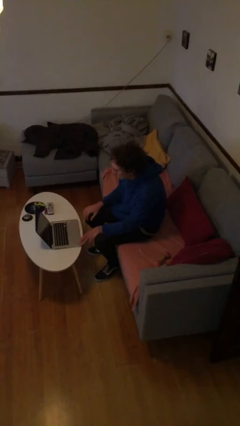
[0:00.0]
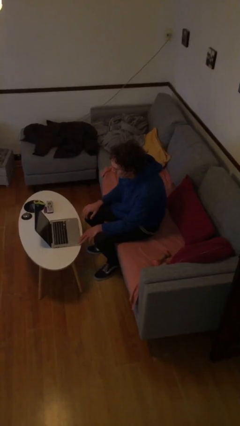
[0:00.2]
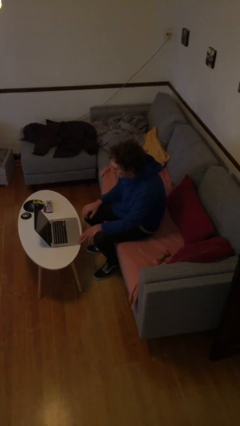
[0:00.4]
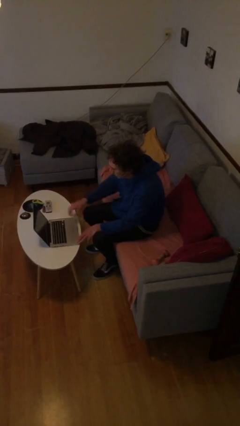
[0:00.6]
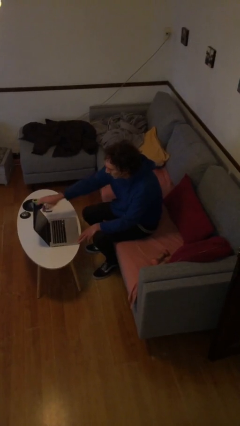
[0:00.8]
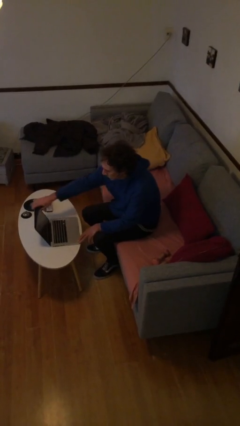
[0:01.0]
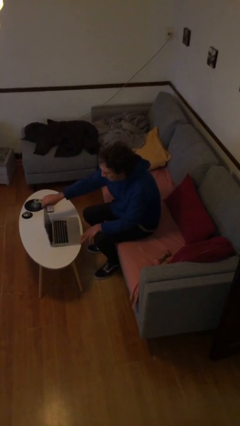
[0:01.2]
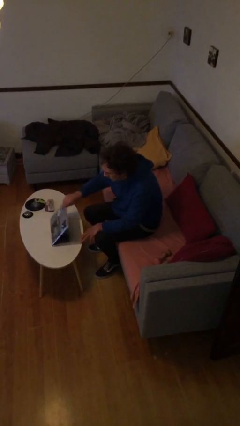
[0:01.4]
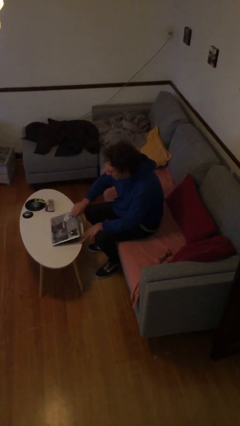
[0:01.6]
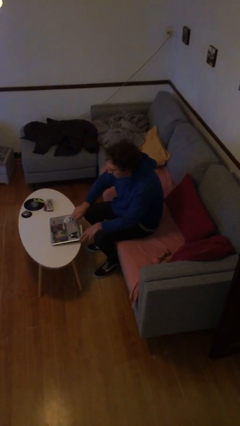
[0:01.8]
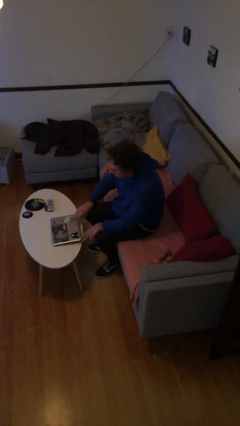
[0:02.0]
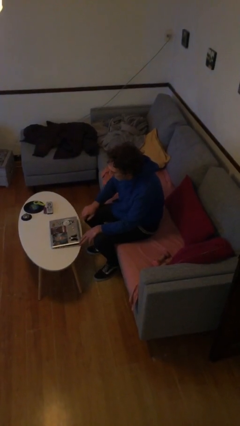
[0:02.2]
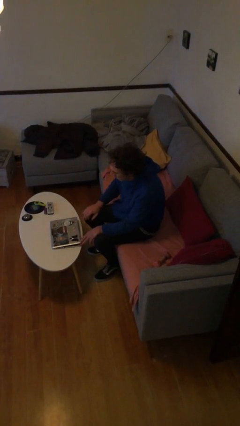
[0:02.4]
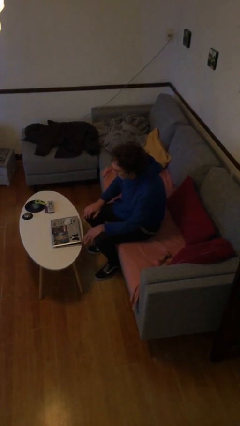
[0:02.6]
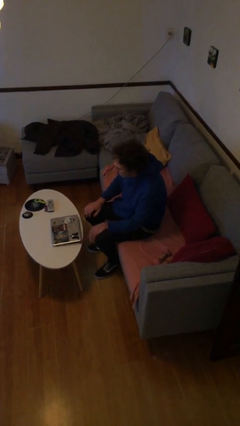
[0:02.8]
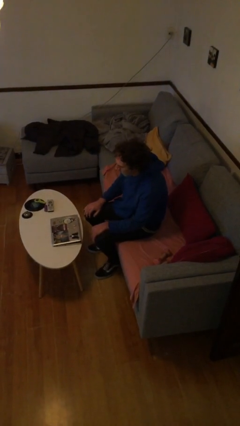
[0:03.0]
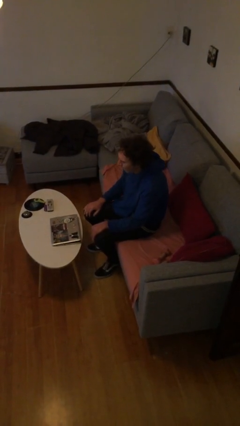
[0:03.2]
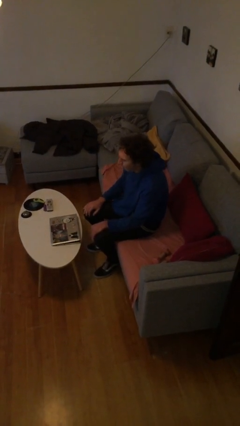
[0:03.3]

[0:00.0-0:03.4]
person closes laptop

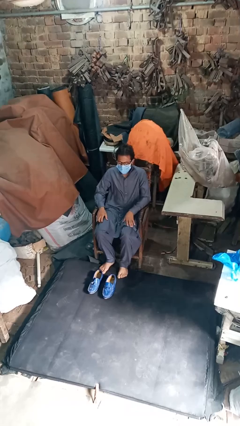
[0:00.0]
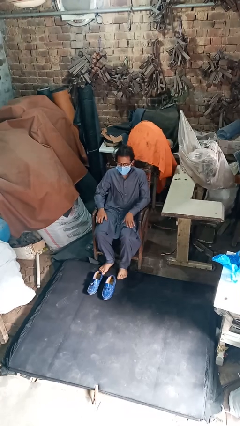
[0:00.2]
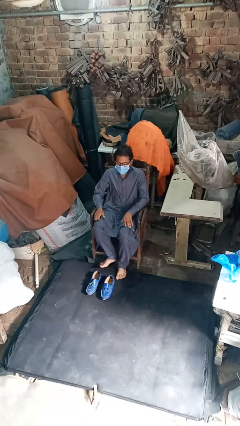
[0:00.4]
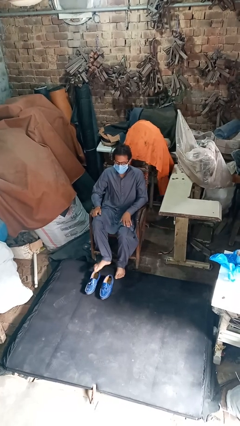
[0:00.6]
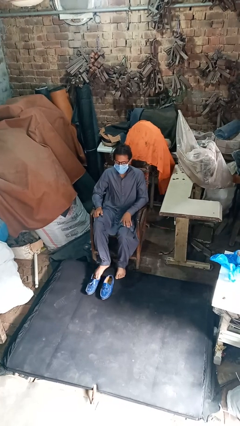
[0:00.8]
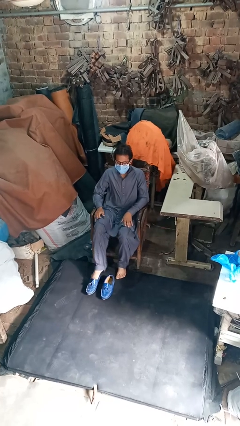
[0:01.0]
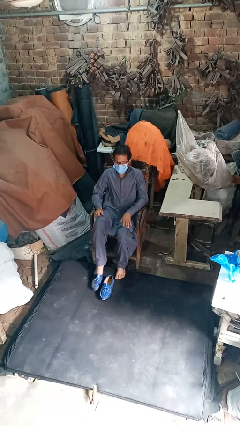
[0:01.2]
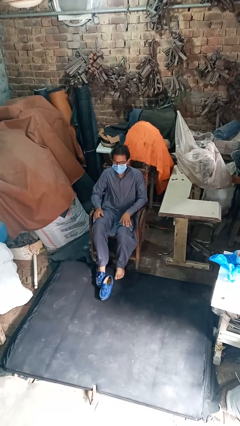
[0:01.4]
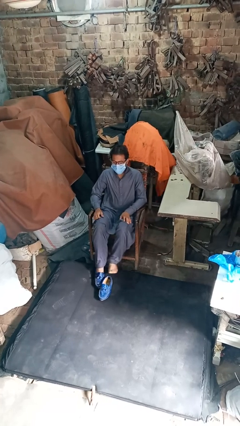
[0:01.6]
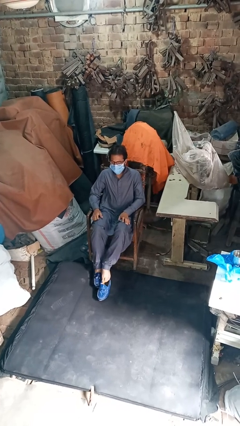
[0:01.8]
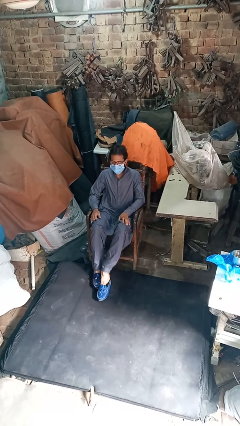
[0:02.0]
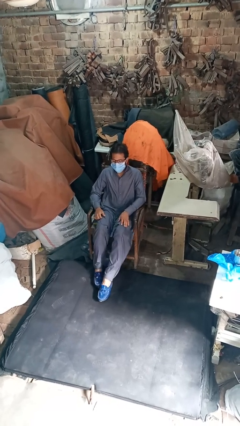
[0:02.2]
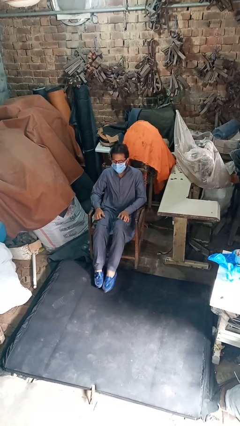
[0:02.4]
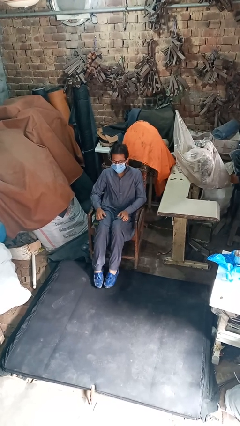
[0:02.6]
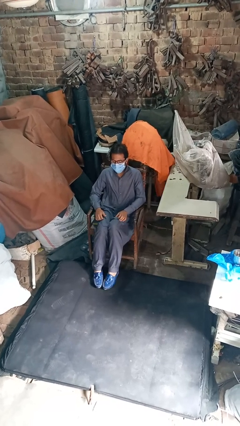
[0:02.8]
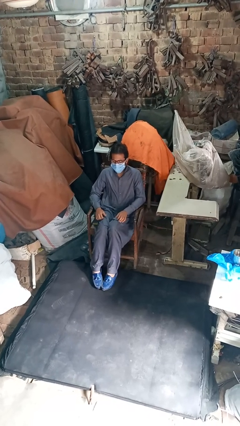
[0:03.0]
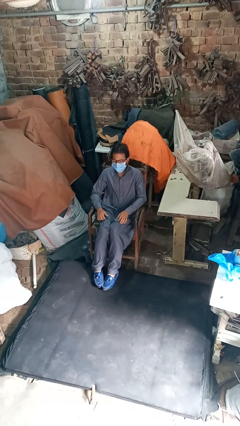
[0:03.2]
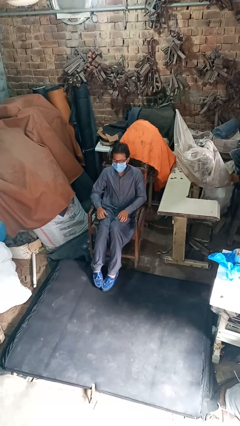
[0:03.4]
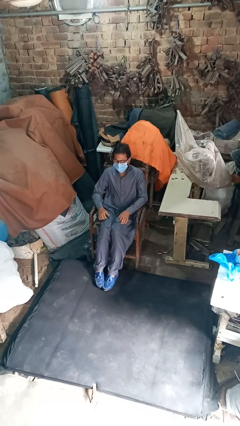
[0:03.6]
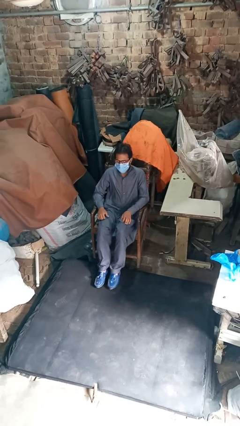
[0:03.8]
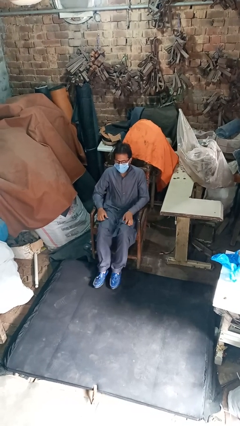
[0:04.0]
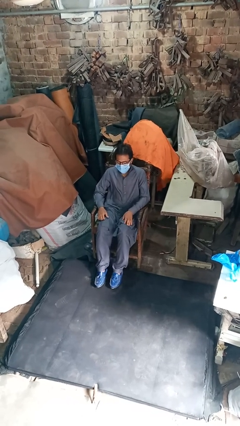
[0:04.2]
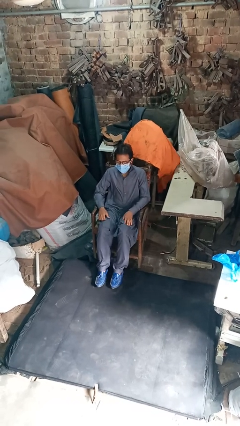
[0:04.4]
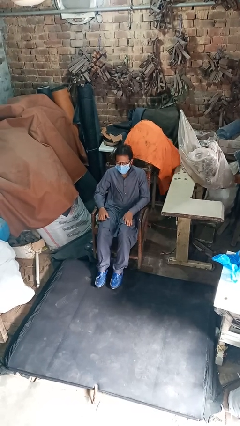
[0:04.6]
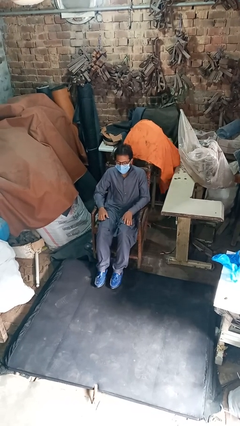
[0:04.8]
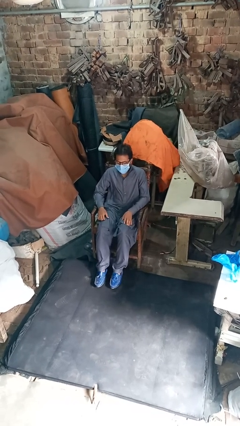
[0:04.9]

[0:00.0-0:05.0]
person puts on shoes

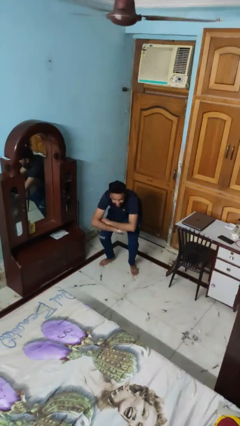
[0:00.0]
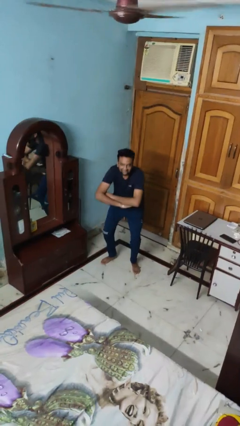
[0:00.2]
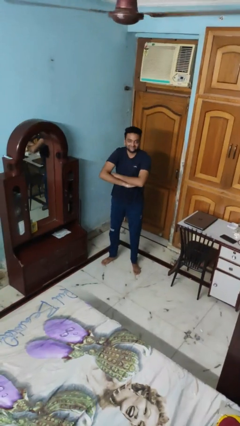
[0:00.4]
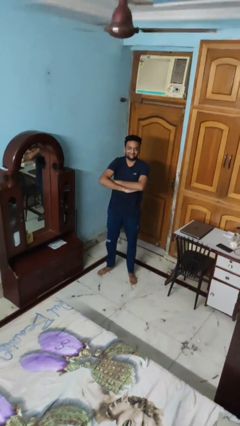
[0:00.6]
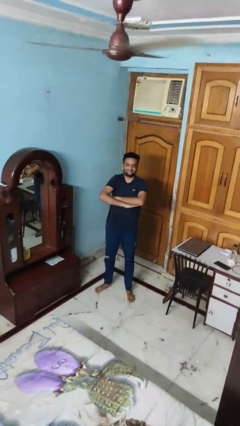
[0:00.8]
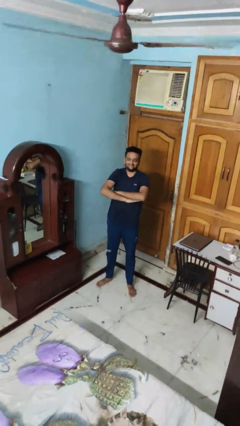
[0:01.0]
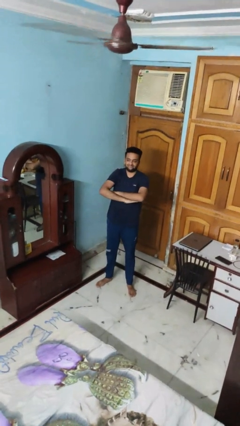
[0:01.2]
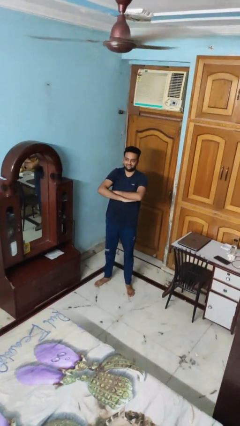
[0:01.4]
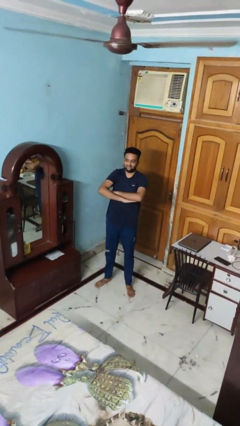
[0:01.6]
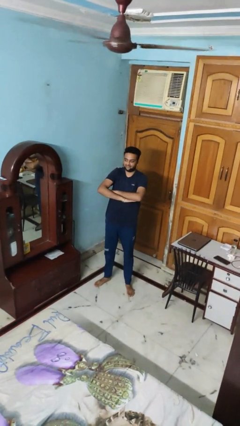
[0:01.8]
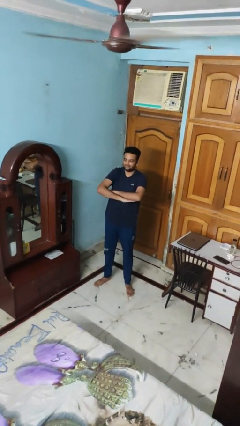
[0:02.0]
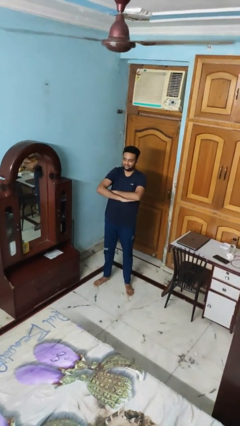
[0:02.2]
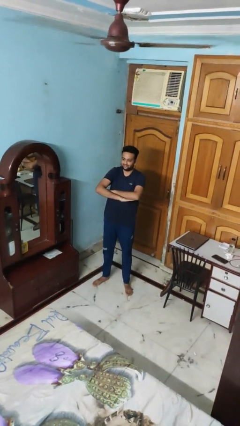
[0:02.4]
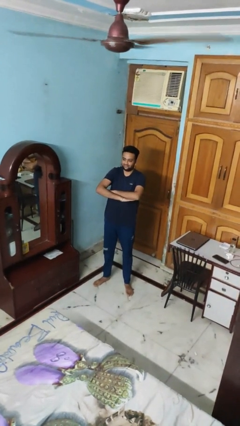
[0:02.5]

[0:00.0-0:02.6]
person stands up

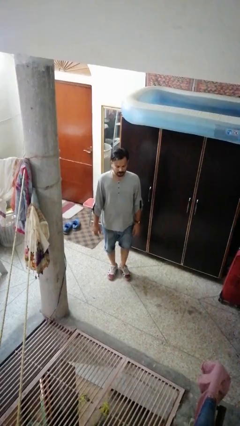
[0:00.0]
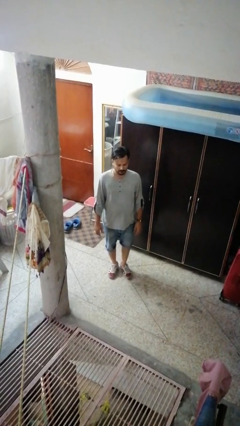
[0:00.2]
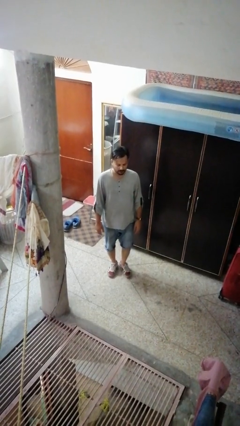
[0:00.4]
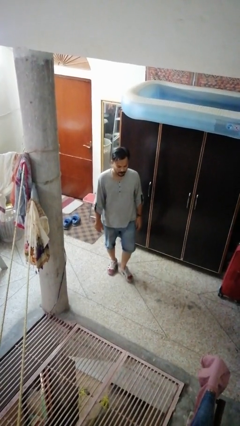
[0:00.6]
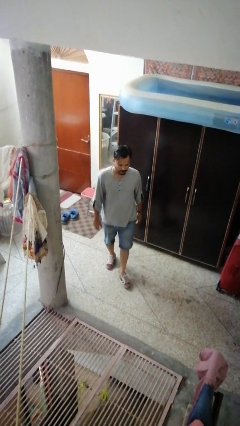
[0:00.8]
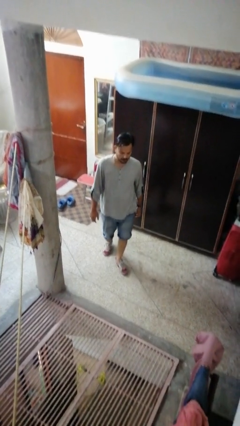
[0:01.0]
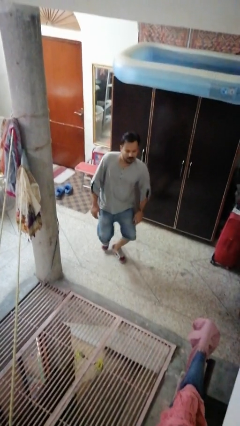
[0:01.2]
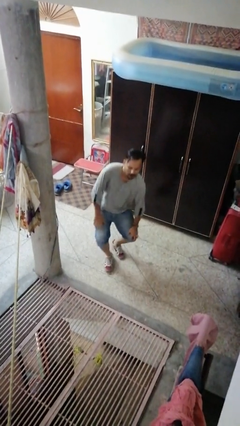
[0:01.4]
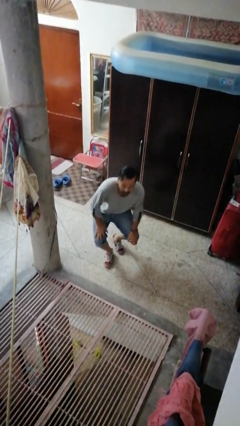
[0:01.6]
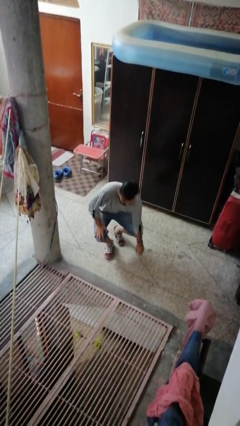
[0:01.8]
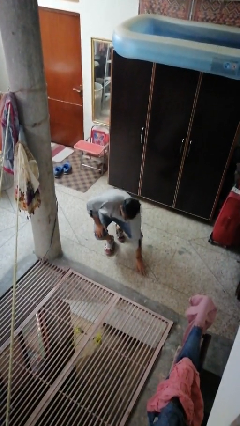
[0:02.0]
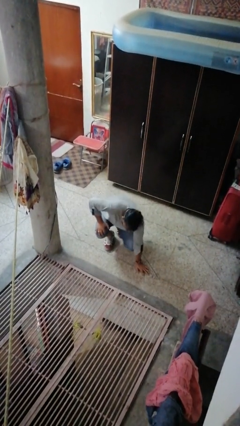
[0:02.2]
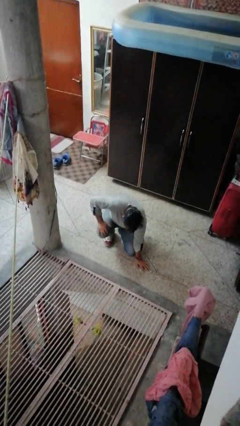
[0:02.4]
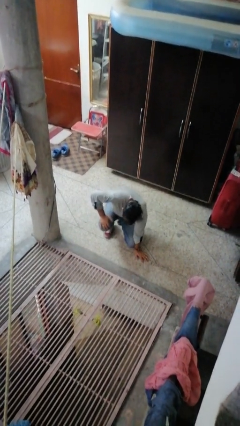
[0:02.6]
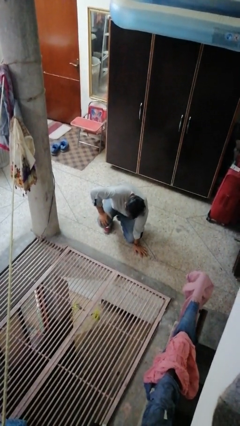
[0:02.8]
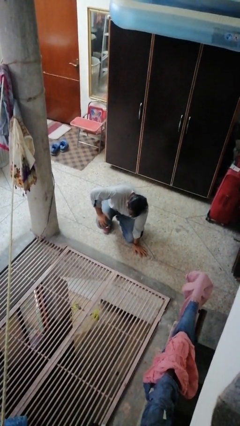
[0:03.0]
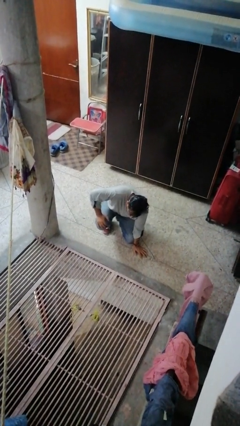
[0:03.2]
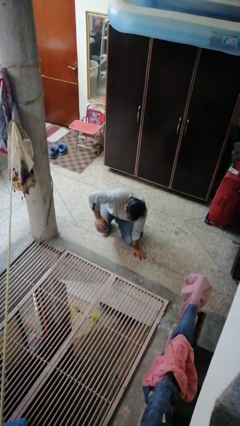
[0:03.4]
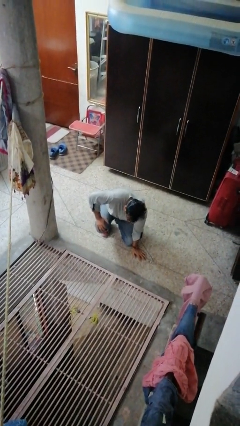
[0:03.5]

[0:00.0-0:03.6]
person falls while standing

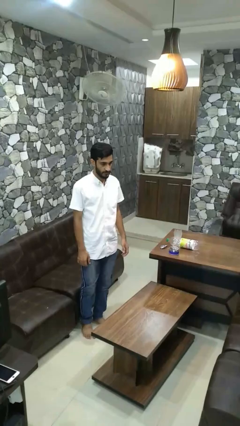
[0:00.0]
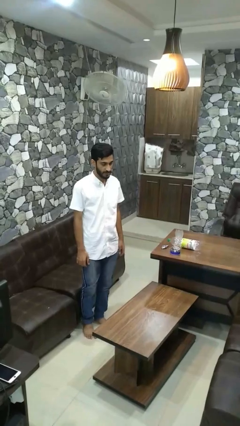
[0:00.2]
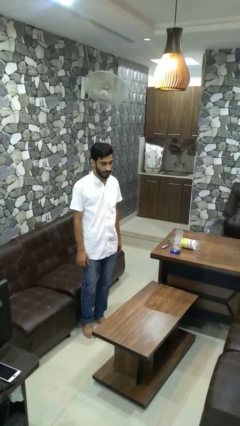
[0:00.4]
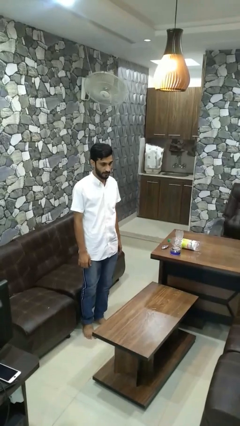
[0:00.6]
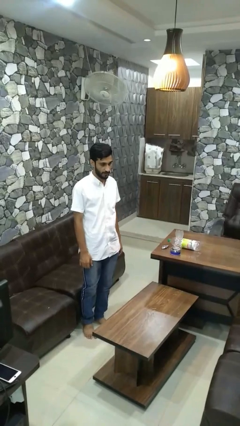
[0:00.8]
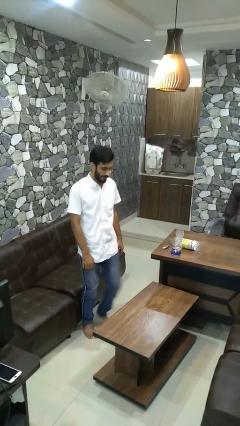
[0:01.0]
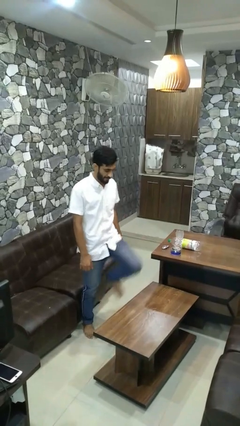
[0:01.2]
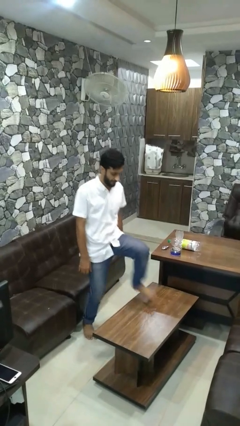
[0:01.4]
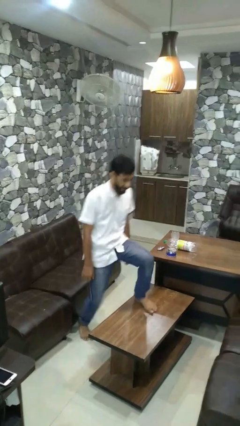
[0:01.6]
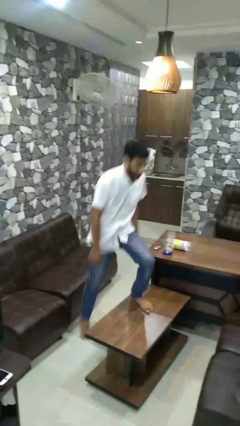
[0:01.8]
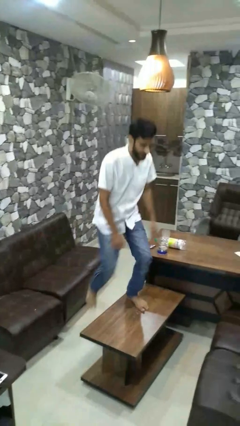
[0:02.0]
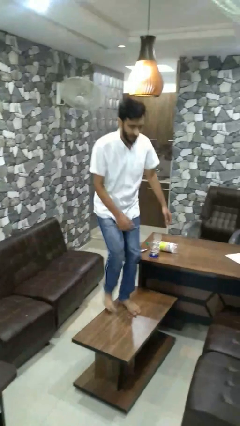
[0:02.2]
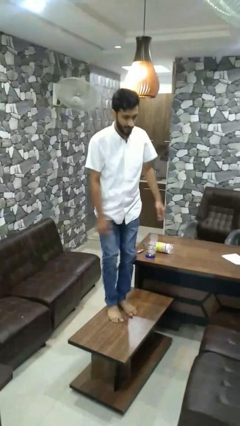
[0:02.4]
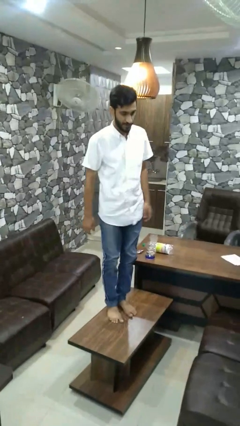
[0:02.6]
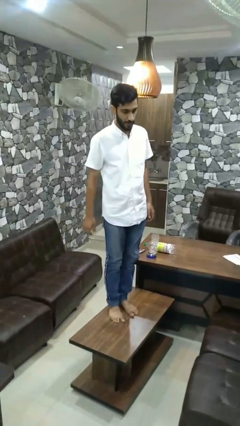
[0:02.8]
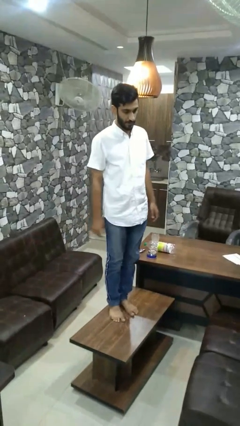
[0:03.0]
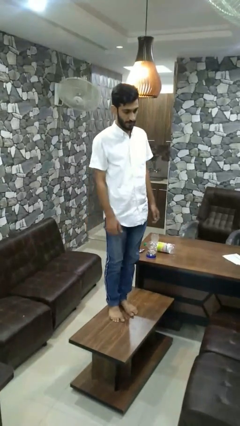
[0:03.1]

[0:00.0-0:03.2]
person climbs on table
